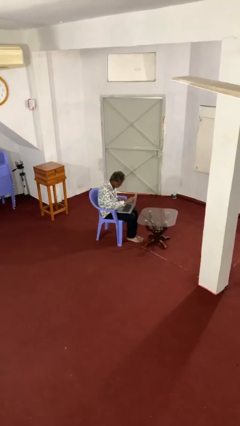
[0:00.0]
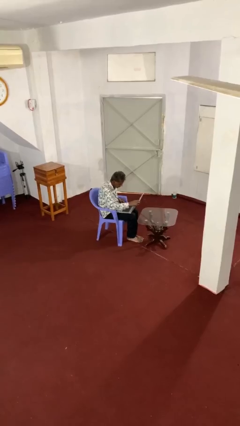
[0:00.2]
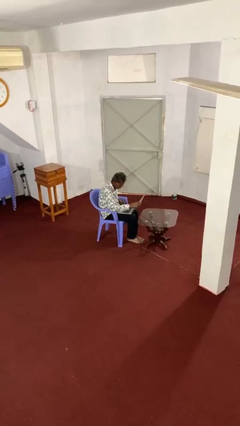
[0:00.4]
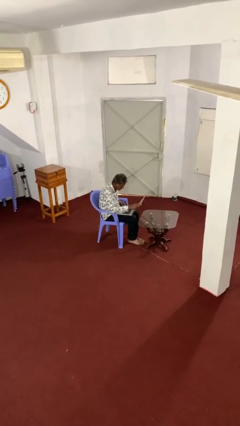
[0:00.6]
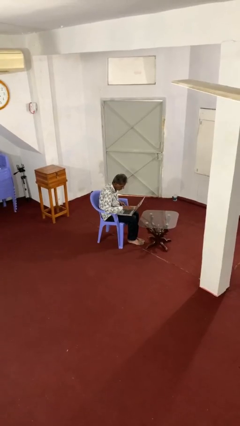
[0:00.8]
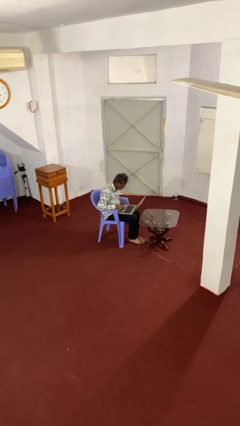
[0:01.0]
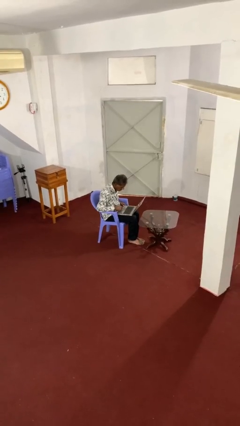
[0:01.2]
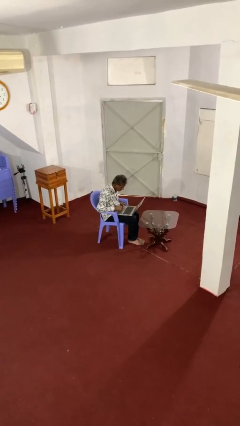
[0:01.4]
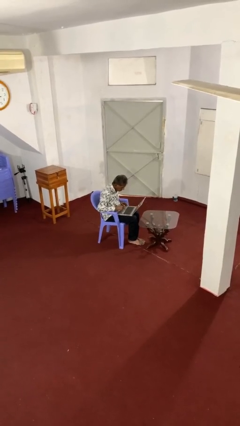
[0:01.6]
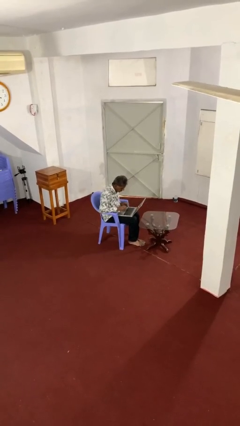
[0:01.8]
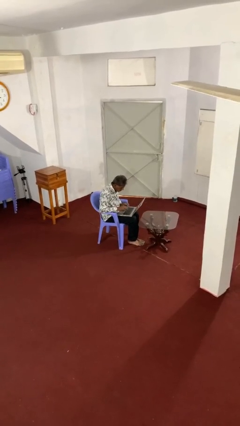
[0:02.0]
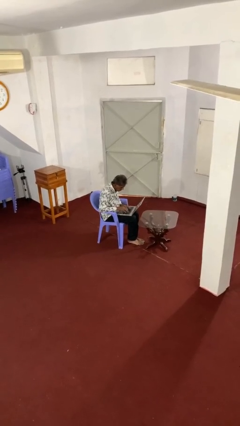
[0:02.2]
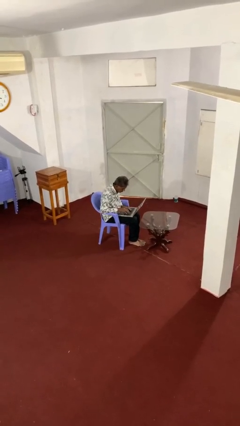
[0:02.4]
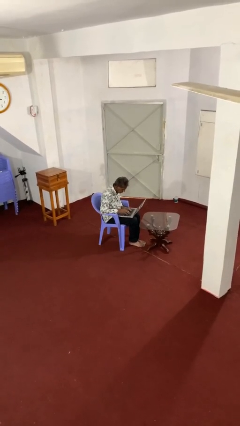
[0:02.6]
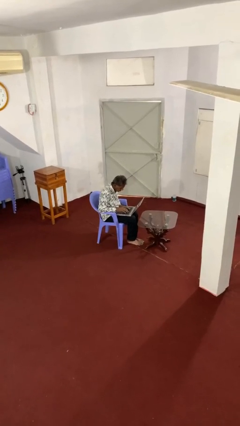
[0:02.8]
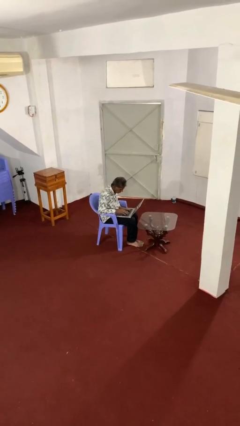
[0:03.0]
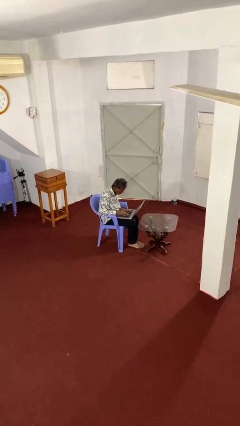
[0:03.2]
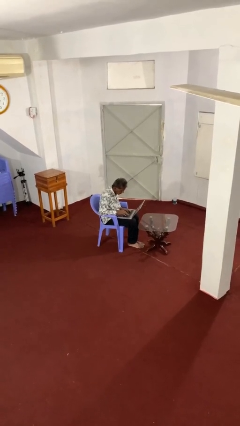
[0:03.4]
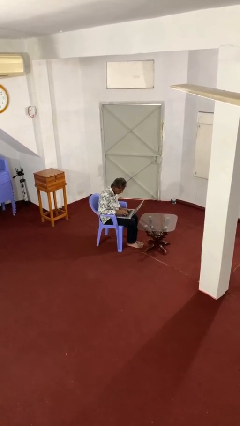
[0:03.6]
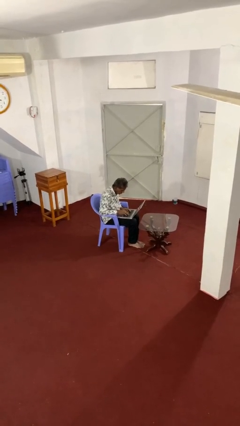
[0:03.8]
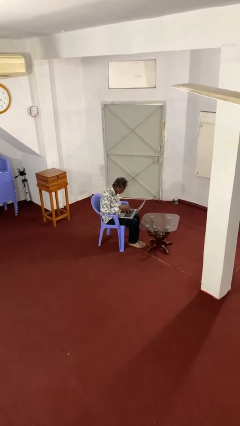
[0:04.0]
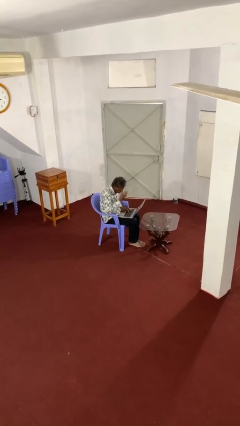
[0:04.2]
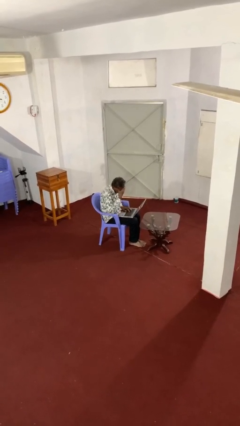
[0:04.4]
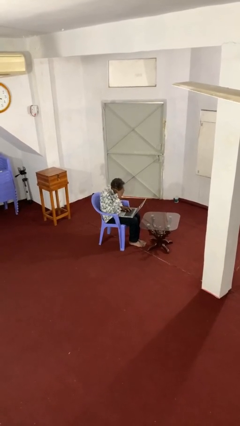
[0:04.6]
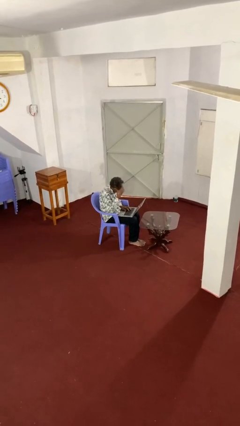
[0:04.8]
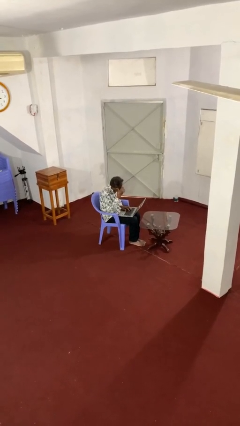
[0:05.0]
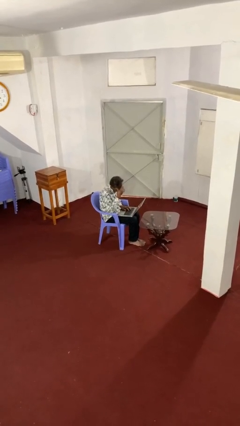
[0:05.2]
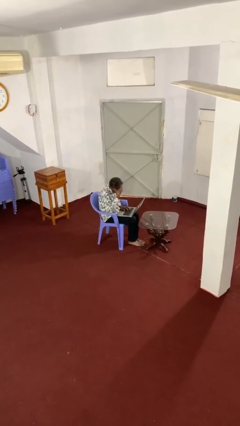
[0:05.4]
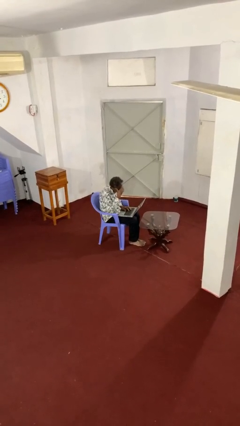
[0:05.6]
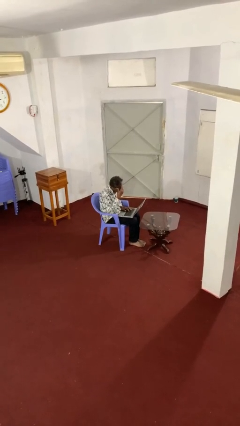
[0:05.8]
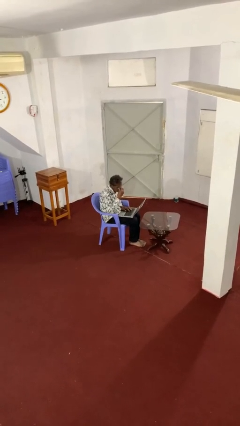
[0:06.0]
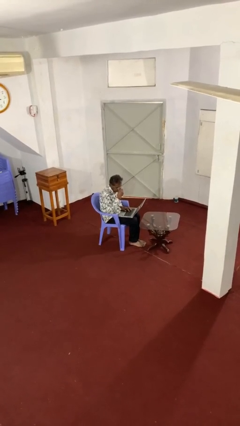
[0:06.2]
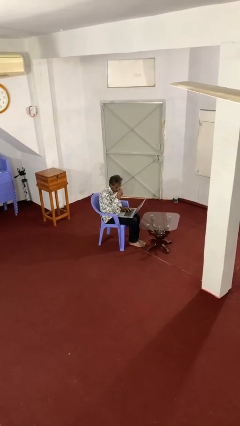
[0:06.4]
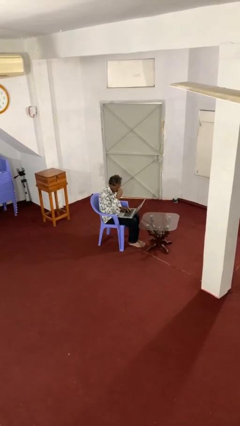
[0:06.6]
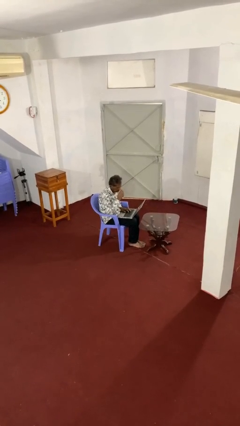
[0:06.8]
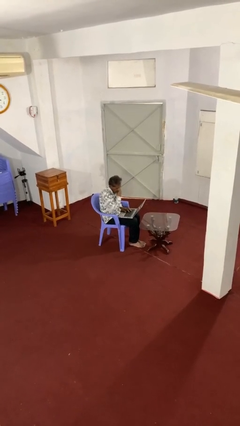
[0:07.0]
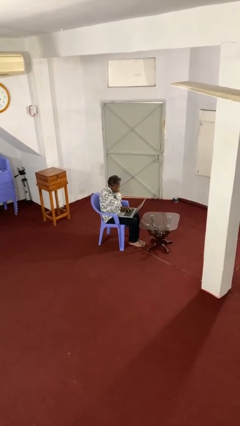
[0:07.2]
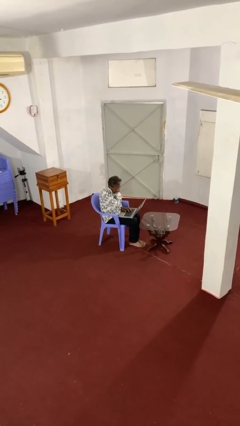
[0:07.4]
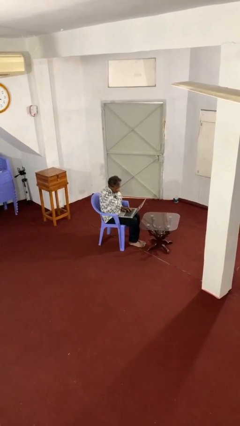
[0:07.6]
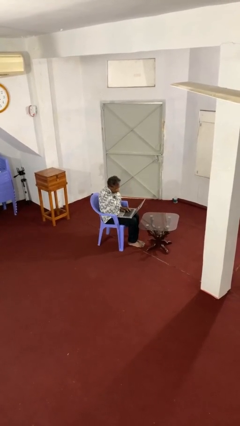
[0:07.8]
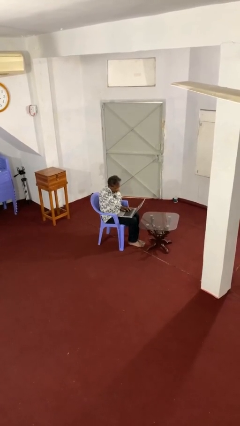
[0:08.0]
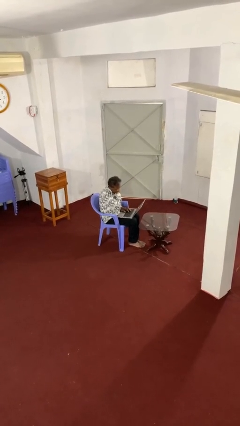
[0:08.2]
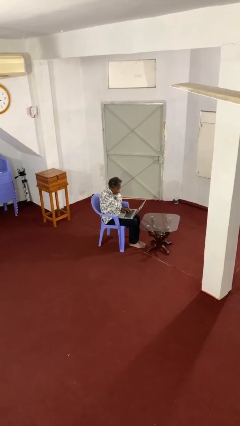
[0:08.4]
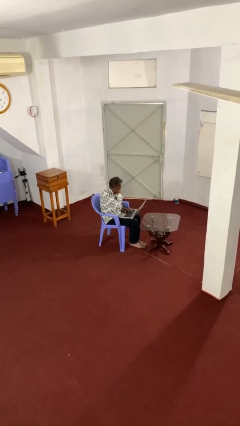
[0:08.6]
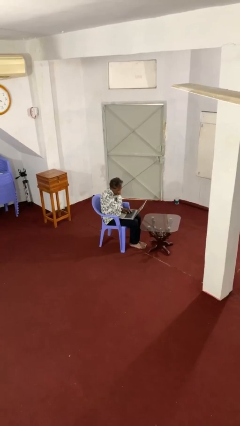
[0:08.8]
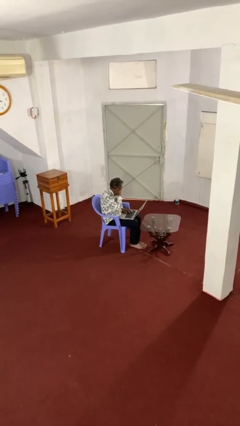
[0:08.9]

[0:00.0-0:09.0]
person interacts with laptop

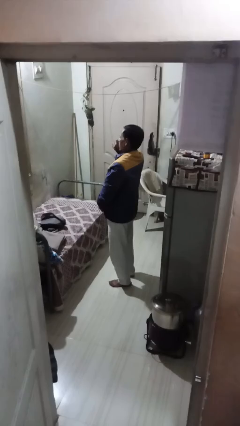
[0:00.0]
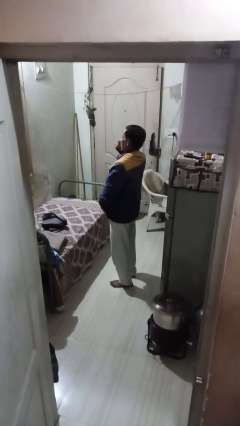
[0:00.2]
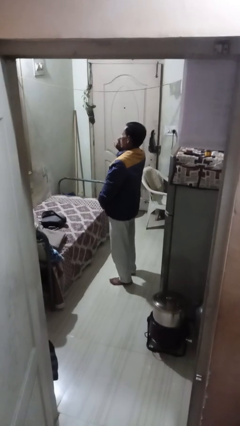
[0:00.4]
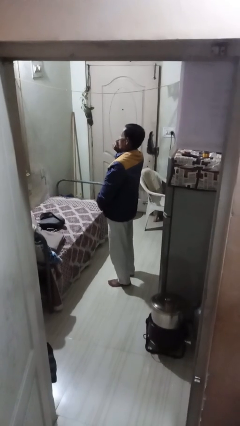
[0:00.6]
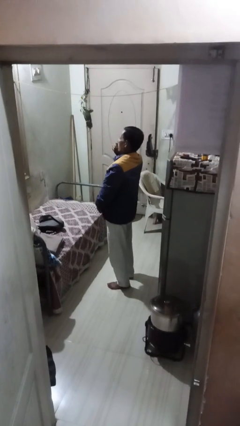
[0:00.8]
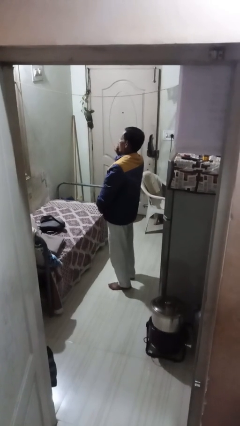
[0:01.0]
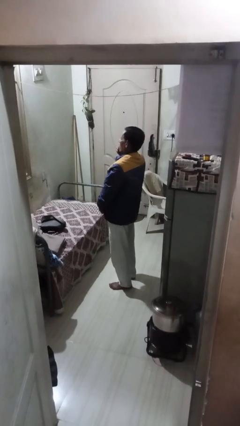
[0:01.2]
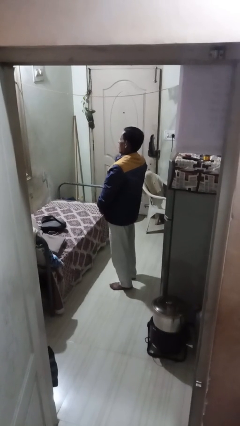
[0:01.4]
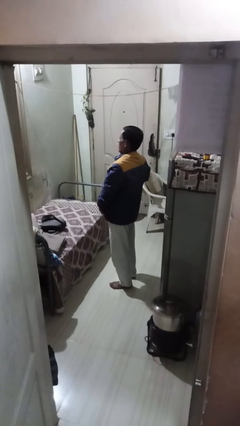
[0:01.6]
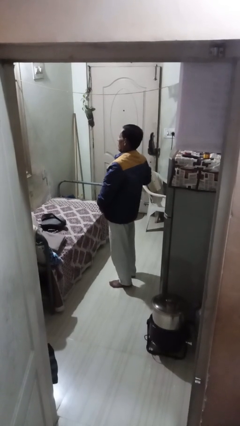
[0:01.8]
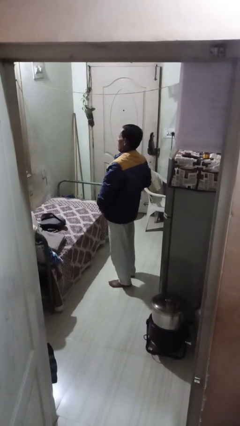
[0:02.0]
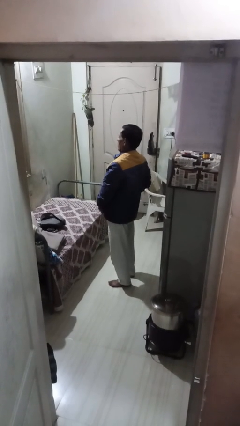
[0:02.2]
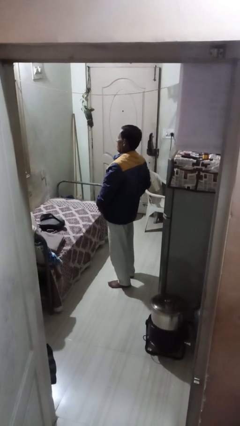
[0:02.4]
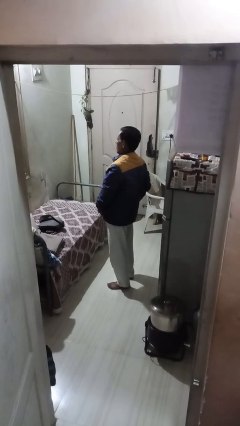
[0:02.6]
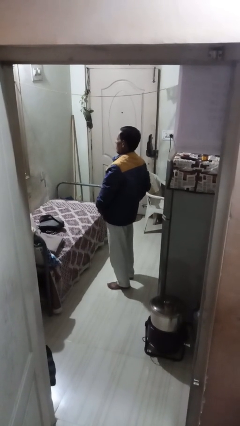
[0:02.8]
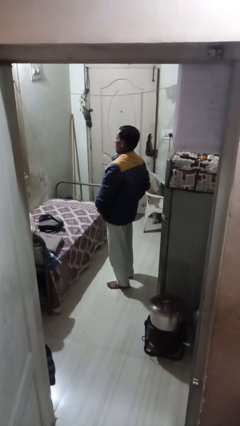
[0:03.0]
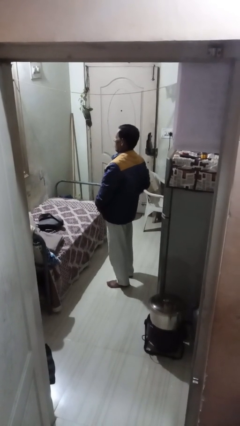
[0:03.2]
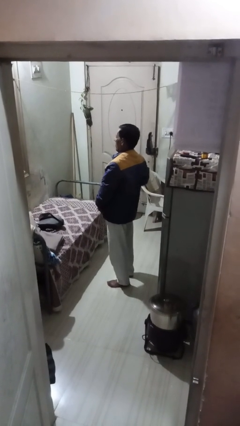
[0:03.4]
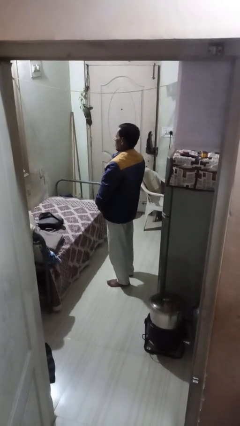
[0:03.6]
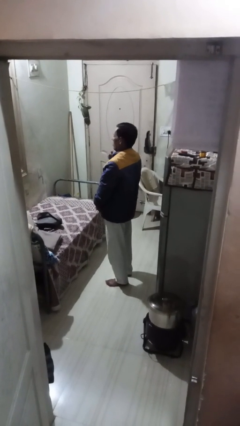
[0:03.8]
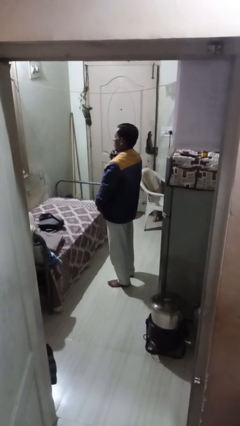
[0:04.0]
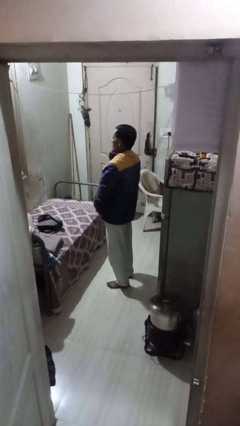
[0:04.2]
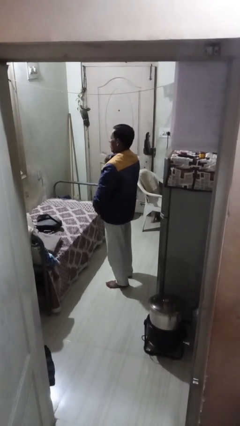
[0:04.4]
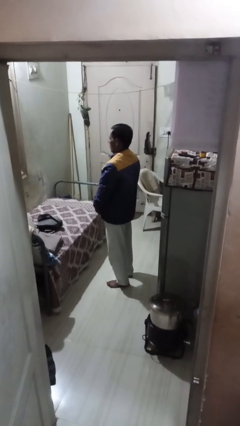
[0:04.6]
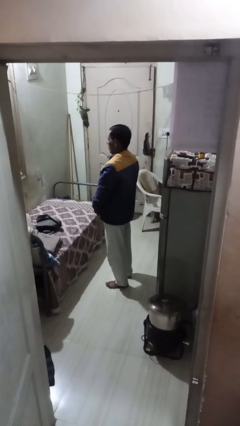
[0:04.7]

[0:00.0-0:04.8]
person zips up jacket

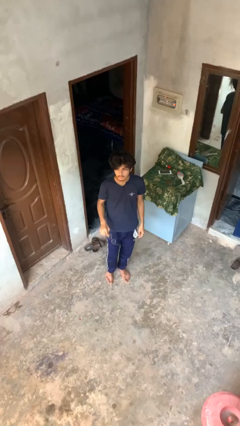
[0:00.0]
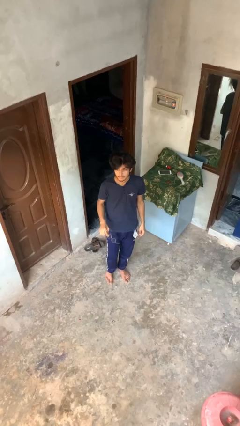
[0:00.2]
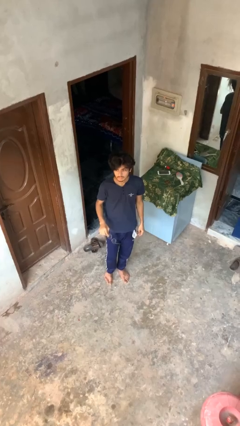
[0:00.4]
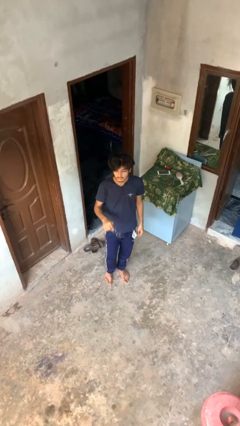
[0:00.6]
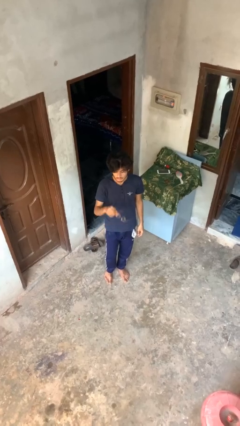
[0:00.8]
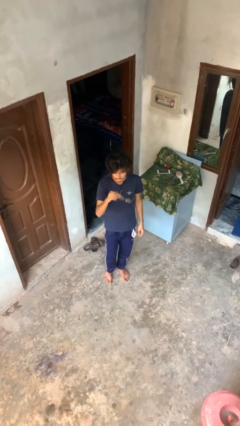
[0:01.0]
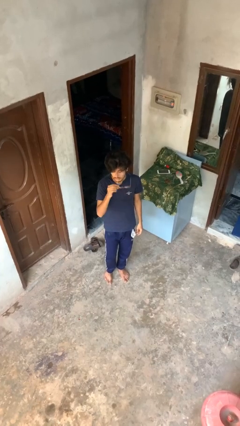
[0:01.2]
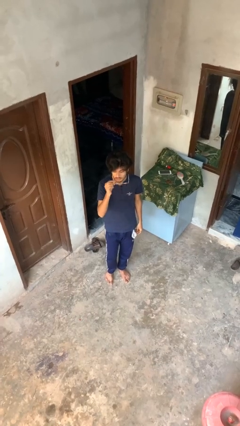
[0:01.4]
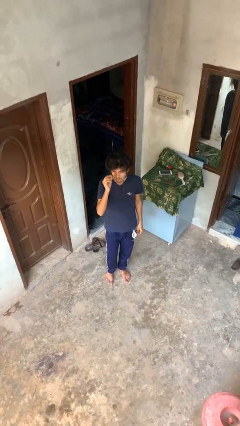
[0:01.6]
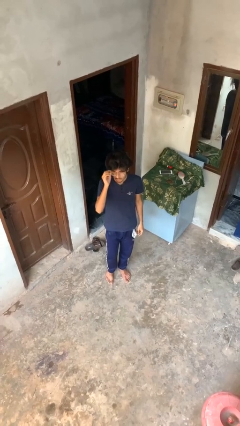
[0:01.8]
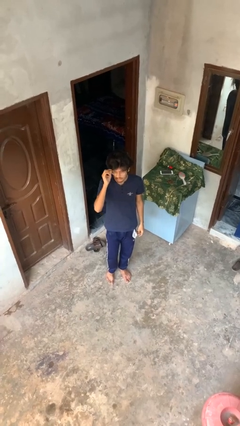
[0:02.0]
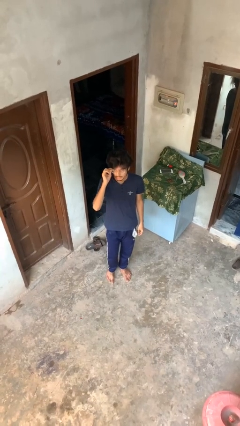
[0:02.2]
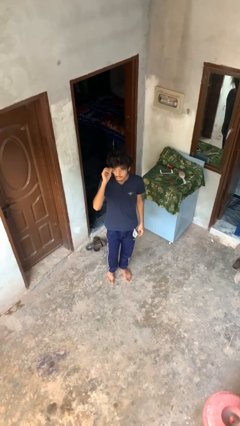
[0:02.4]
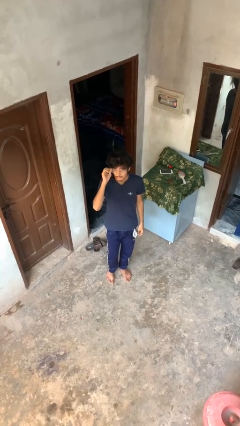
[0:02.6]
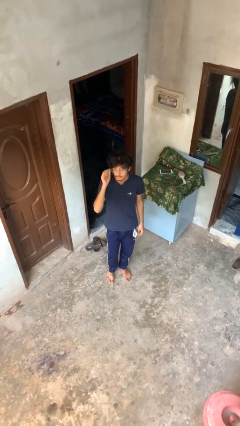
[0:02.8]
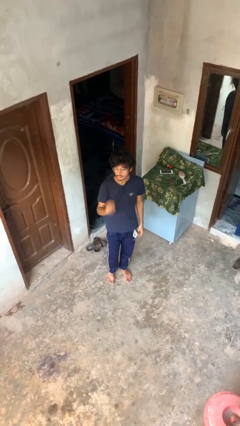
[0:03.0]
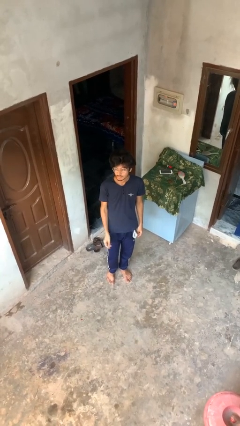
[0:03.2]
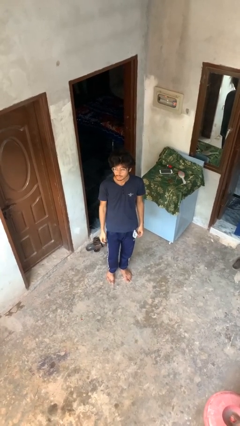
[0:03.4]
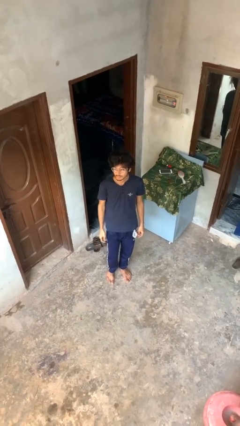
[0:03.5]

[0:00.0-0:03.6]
person puts on glasses
